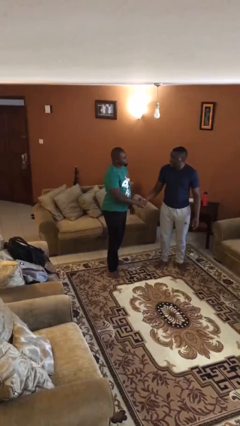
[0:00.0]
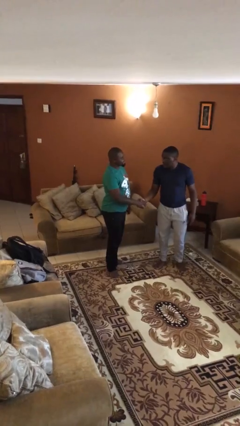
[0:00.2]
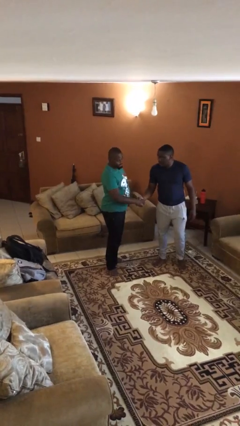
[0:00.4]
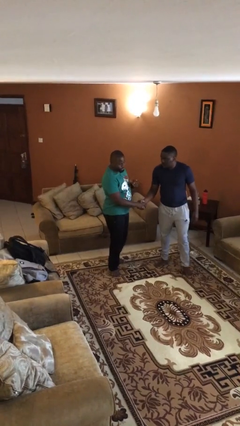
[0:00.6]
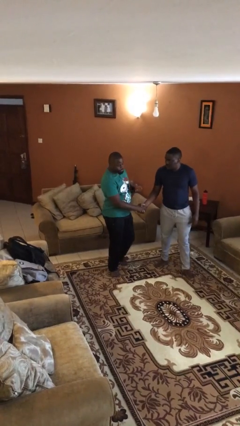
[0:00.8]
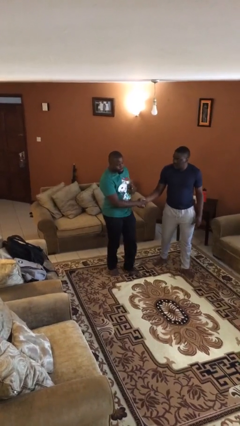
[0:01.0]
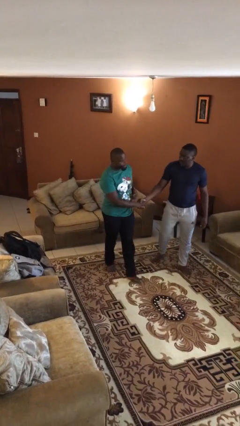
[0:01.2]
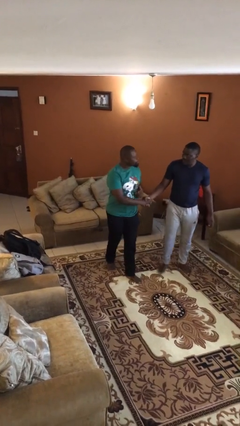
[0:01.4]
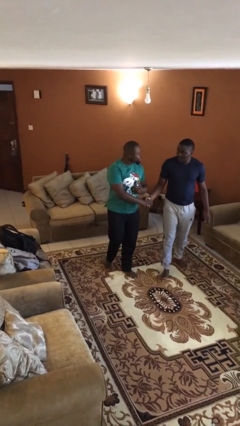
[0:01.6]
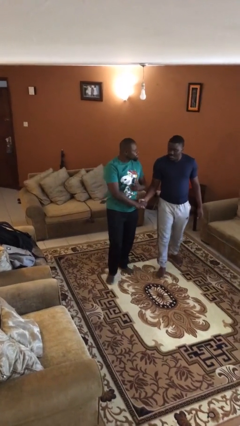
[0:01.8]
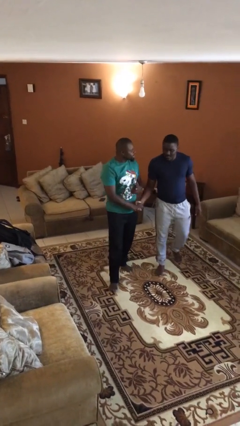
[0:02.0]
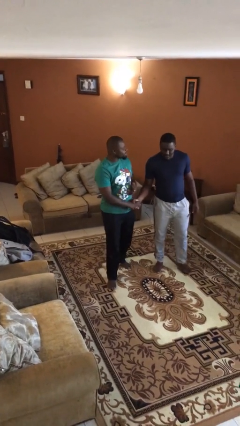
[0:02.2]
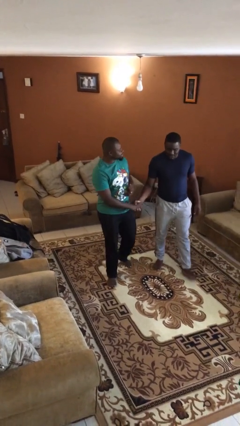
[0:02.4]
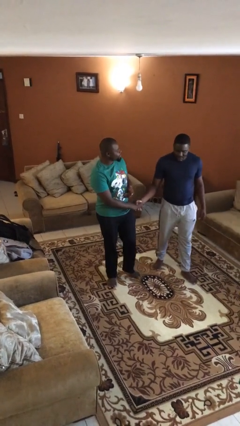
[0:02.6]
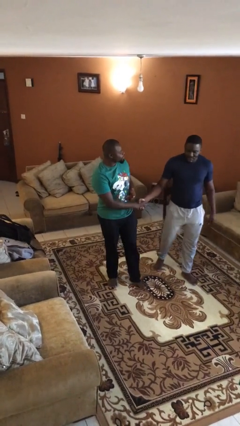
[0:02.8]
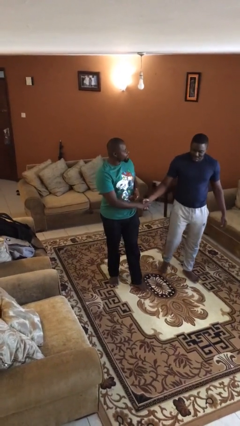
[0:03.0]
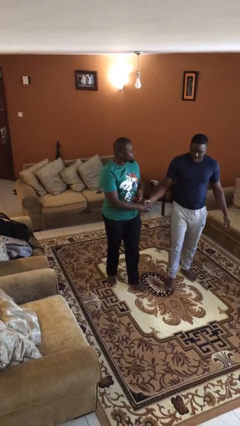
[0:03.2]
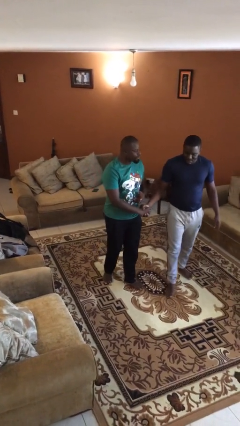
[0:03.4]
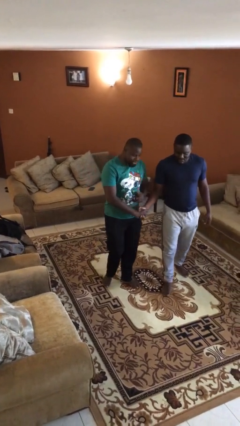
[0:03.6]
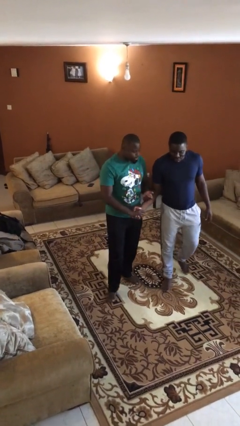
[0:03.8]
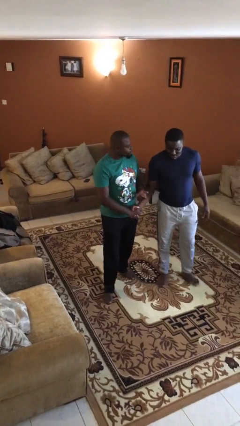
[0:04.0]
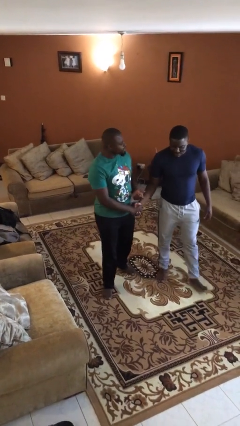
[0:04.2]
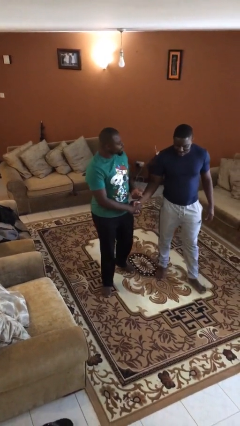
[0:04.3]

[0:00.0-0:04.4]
person holds hand

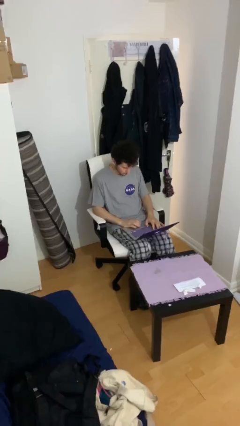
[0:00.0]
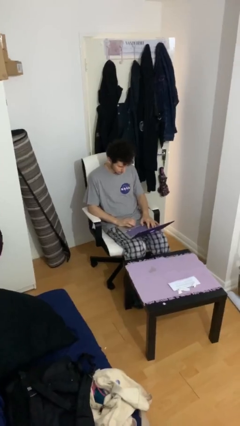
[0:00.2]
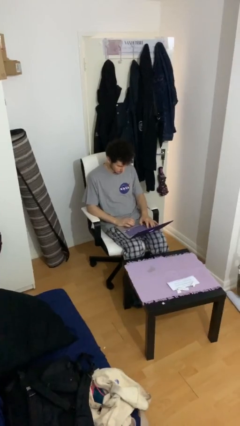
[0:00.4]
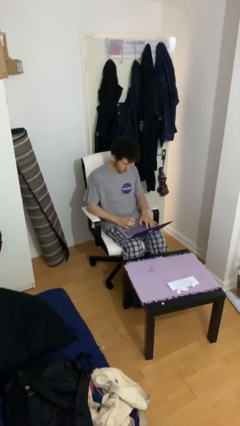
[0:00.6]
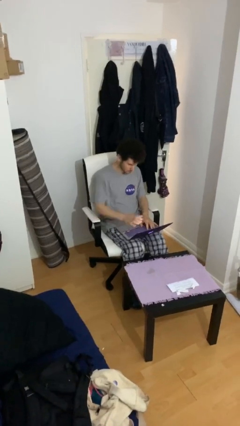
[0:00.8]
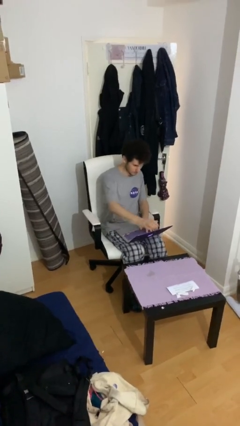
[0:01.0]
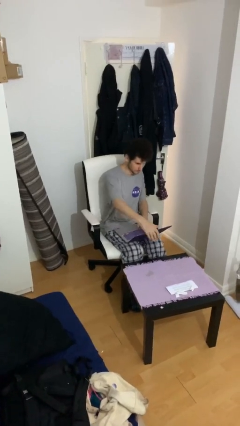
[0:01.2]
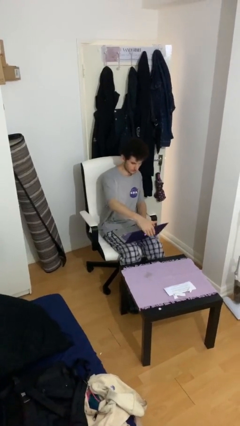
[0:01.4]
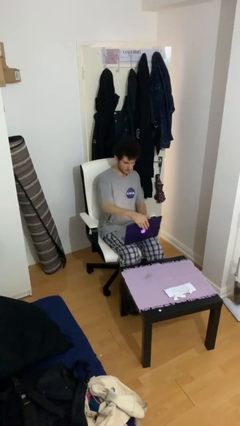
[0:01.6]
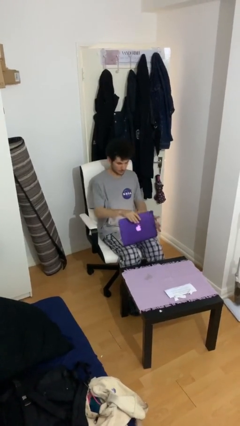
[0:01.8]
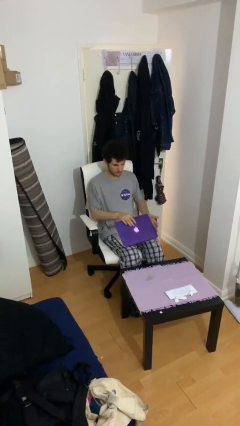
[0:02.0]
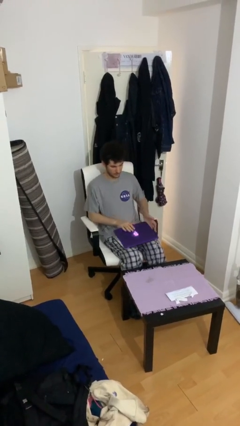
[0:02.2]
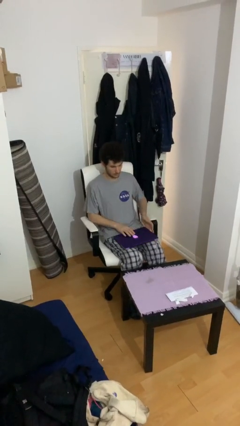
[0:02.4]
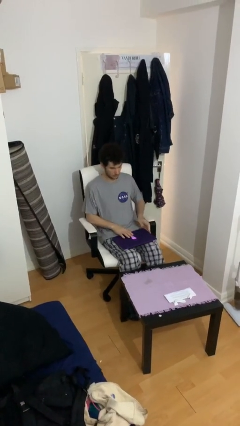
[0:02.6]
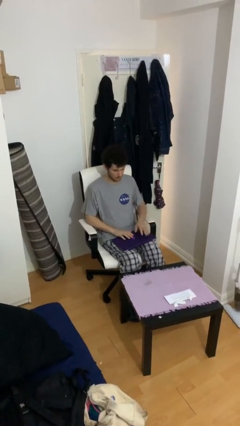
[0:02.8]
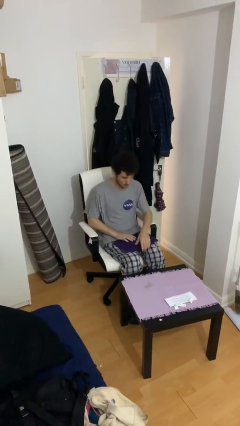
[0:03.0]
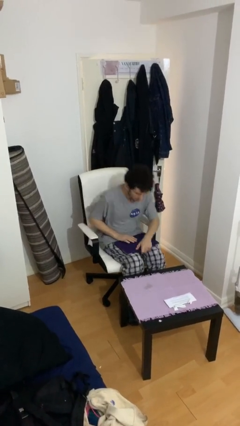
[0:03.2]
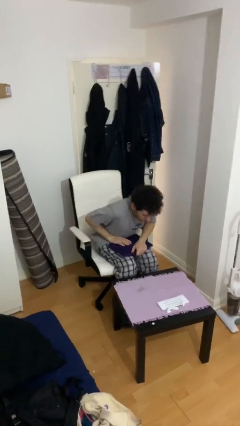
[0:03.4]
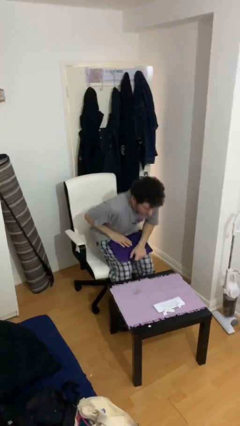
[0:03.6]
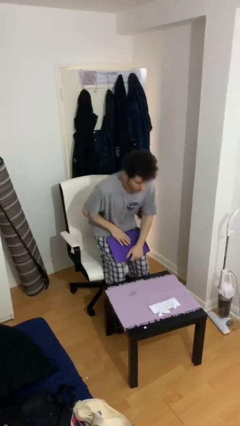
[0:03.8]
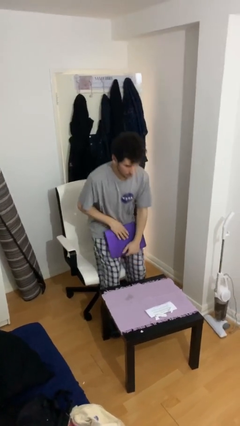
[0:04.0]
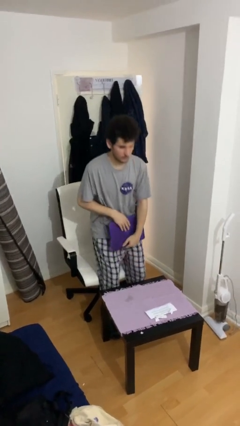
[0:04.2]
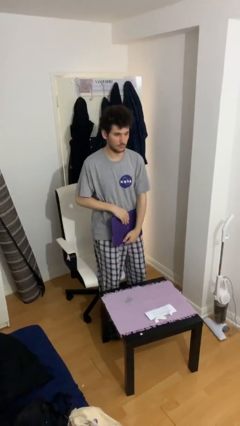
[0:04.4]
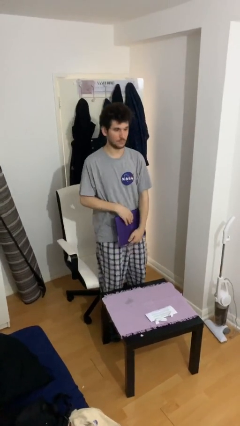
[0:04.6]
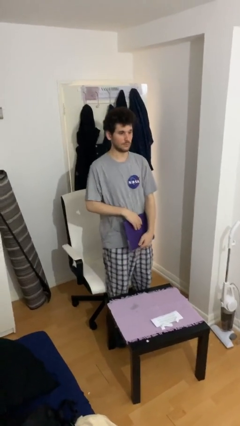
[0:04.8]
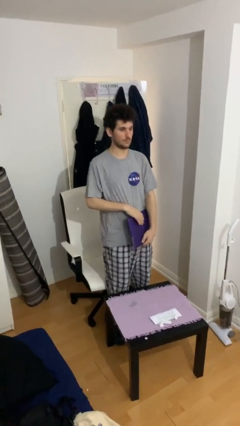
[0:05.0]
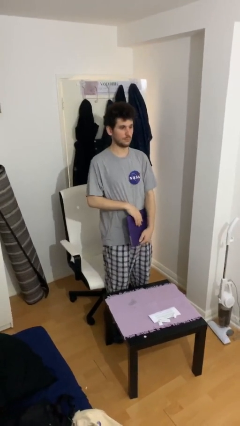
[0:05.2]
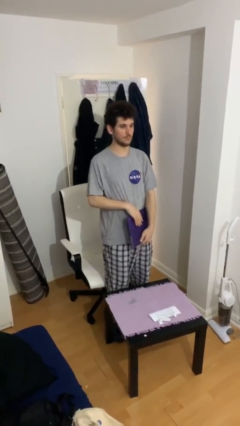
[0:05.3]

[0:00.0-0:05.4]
person stands up

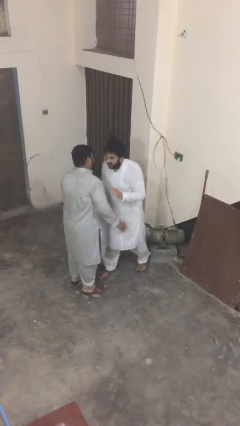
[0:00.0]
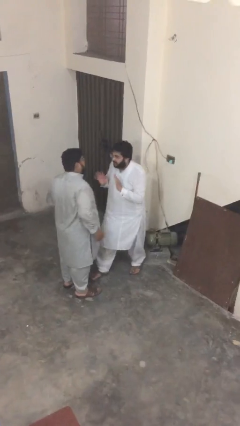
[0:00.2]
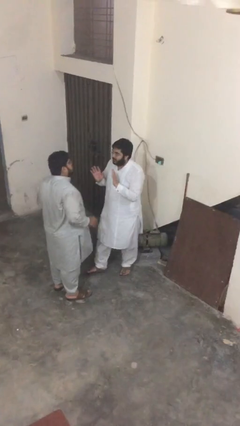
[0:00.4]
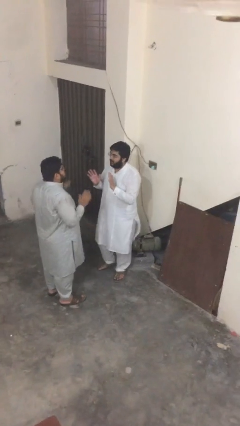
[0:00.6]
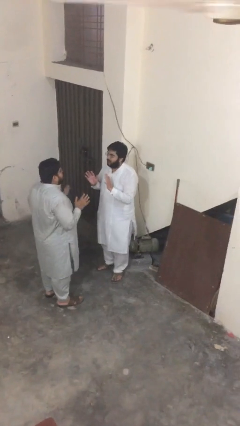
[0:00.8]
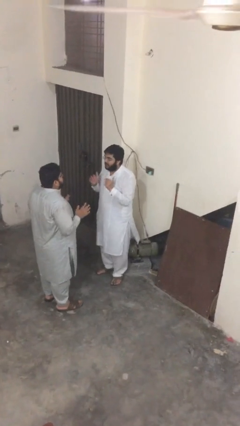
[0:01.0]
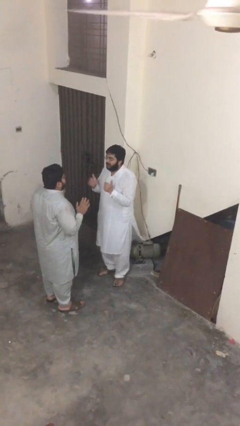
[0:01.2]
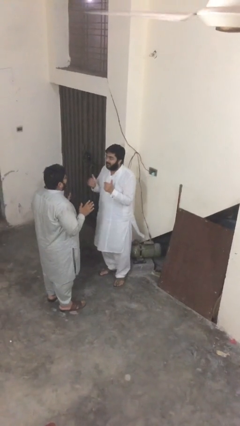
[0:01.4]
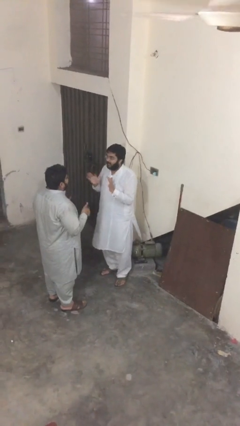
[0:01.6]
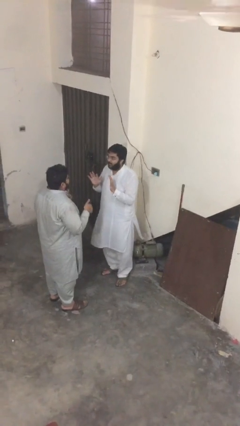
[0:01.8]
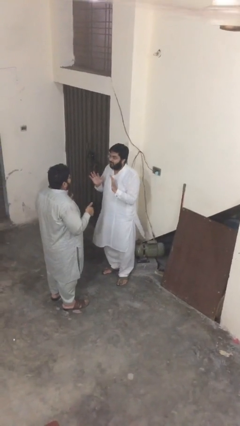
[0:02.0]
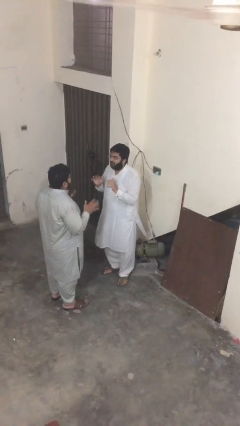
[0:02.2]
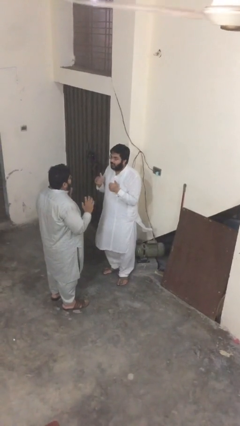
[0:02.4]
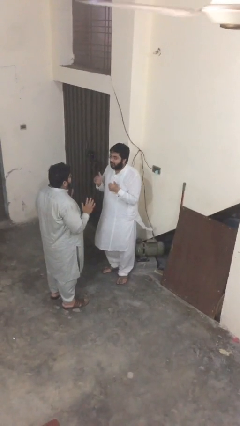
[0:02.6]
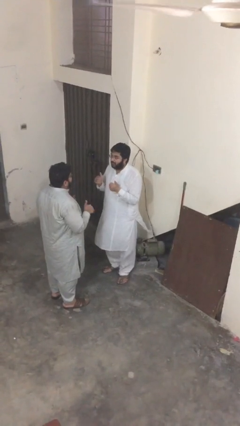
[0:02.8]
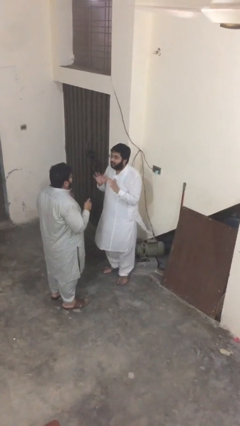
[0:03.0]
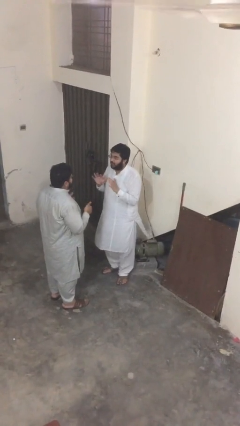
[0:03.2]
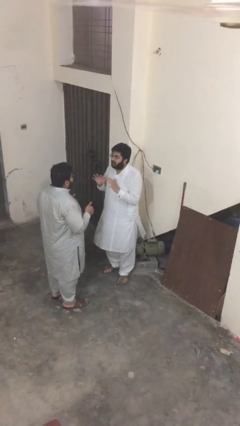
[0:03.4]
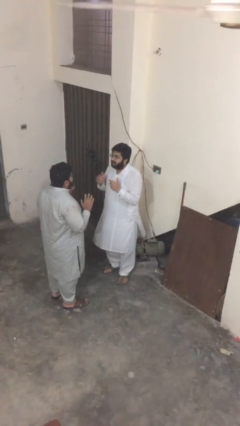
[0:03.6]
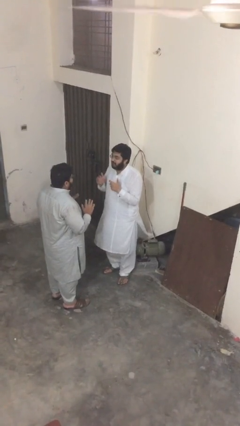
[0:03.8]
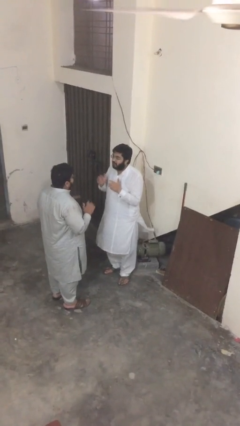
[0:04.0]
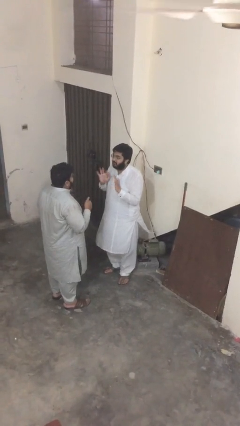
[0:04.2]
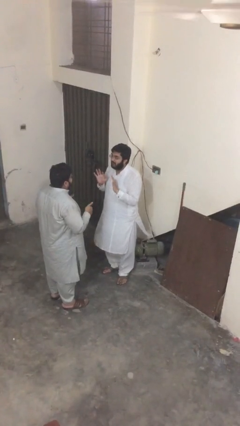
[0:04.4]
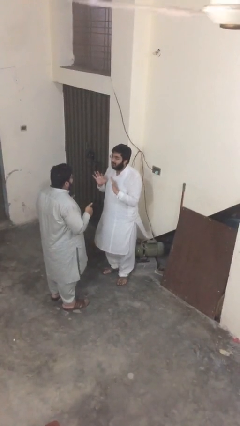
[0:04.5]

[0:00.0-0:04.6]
person talks to person

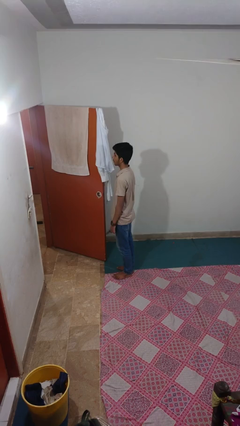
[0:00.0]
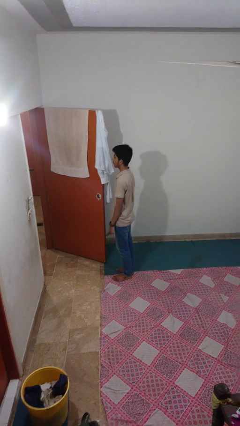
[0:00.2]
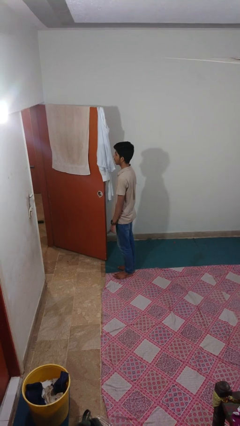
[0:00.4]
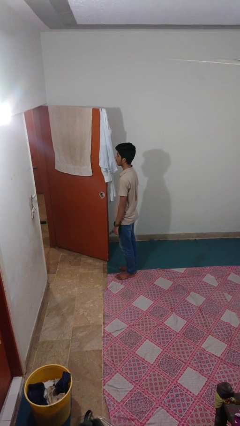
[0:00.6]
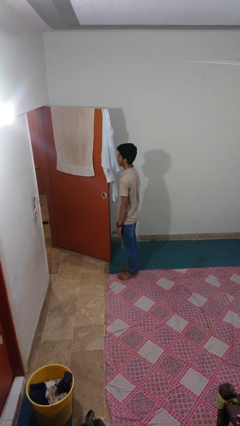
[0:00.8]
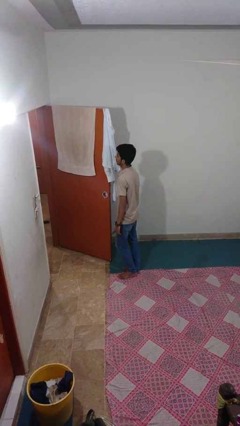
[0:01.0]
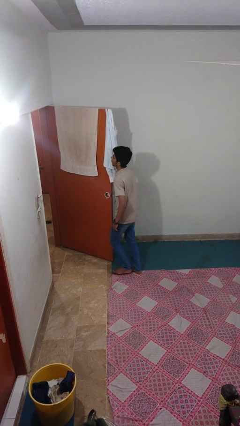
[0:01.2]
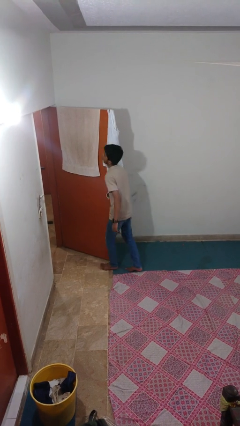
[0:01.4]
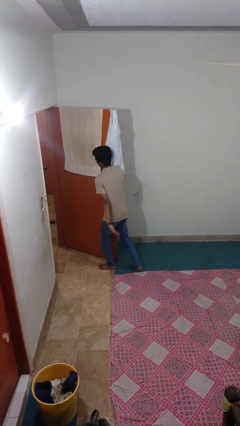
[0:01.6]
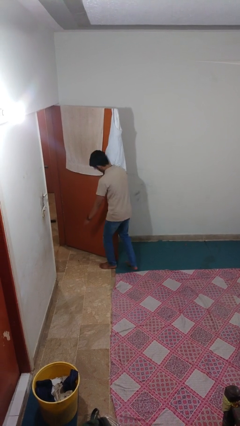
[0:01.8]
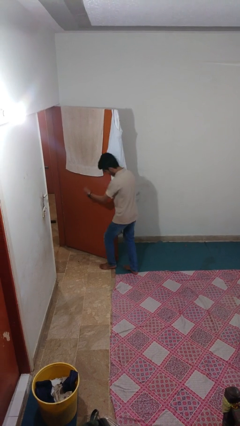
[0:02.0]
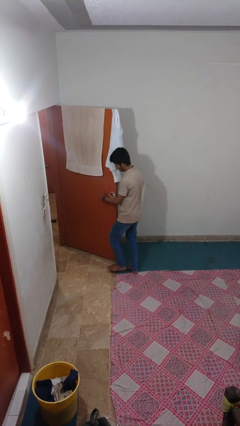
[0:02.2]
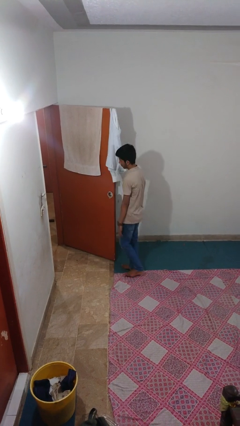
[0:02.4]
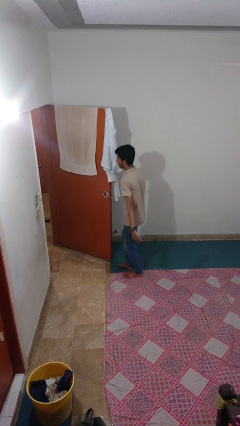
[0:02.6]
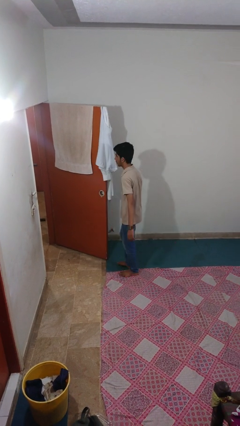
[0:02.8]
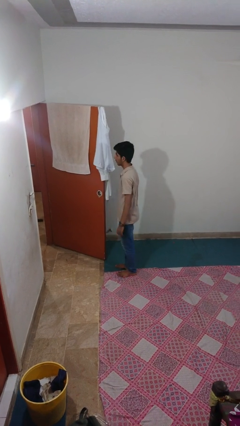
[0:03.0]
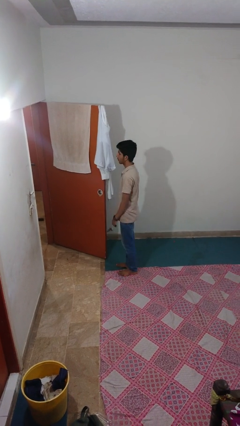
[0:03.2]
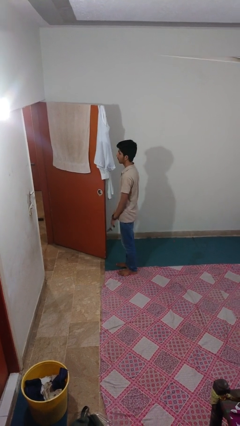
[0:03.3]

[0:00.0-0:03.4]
person bumps into wall

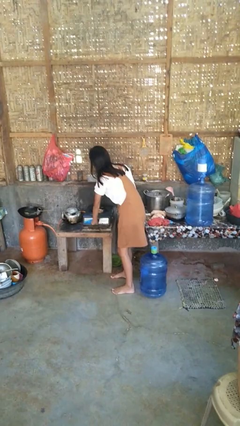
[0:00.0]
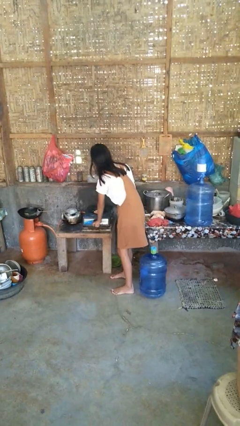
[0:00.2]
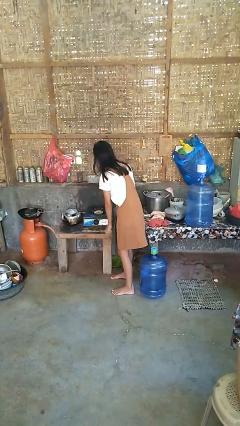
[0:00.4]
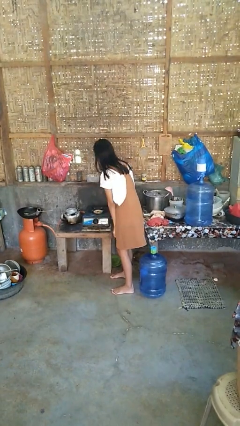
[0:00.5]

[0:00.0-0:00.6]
person turns off stovetop
